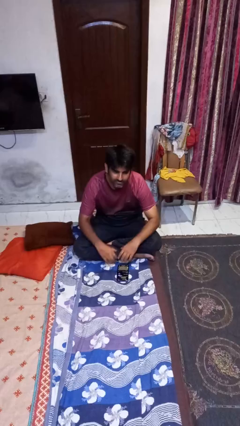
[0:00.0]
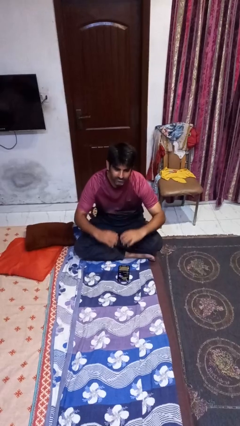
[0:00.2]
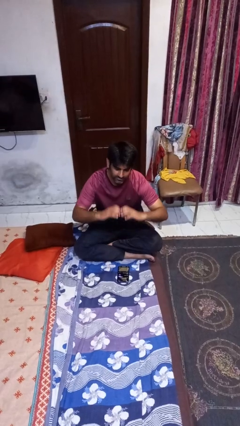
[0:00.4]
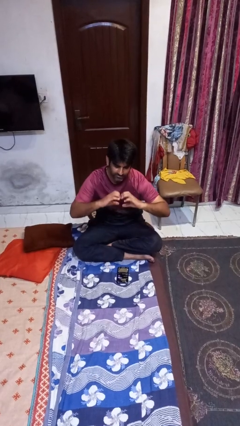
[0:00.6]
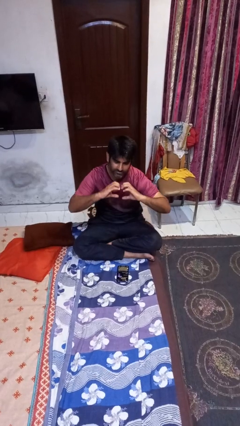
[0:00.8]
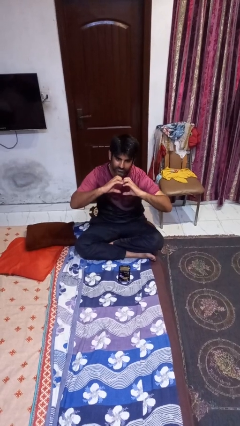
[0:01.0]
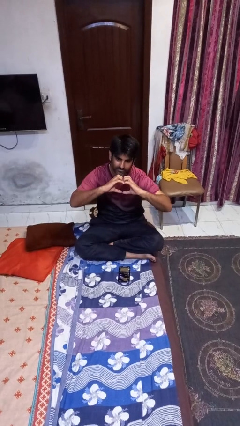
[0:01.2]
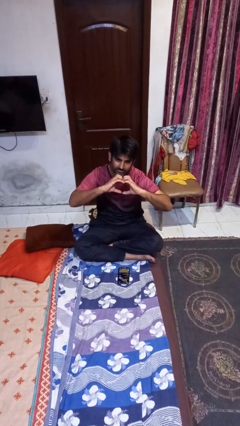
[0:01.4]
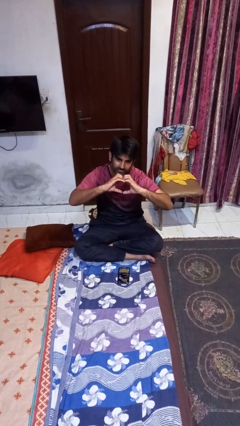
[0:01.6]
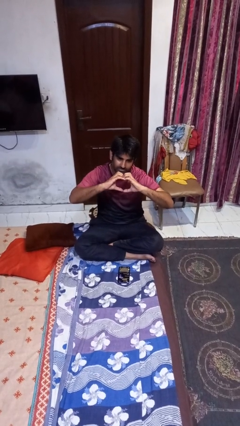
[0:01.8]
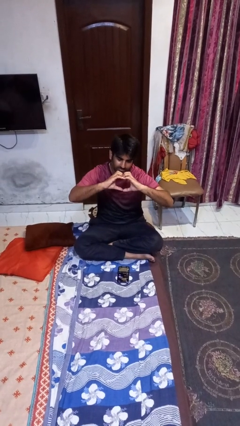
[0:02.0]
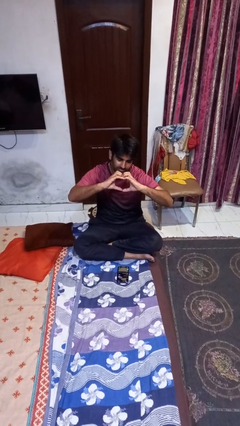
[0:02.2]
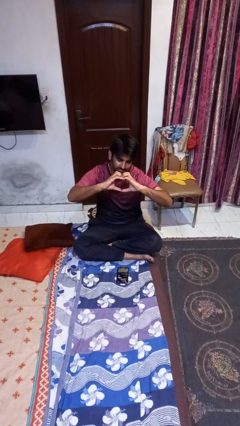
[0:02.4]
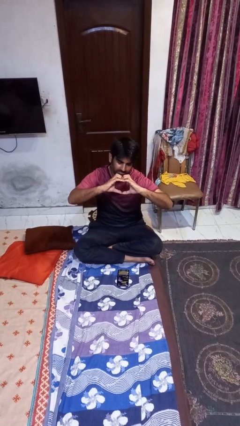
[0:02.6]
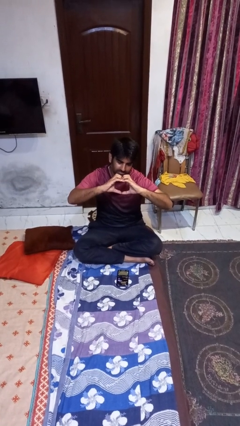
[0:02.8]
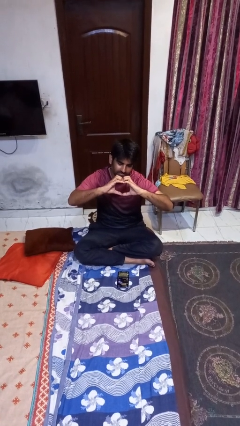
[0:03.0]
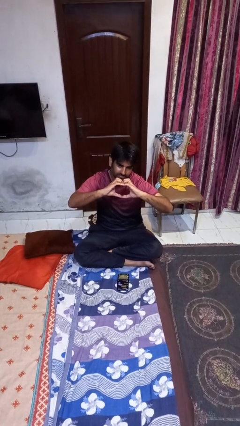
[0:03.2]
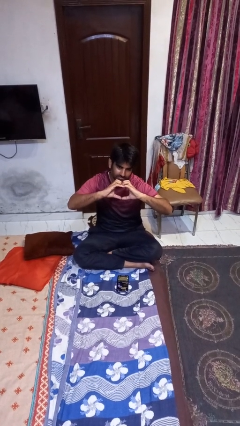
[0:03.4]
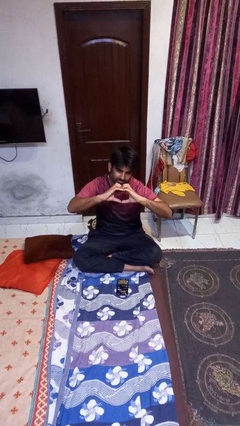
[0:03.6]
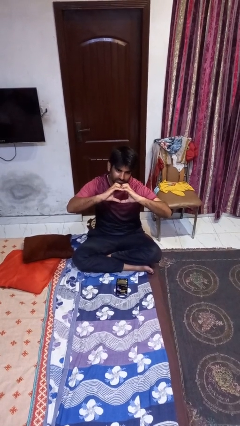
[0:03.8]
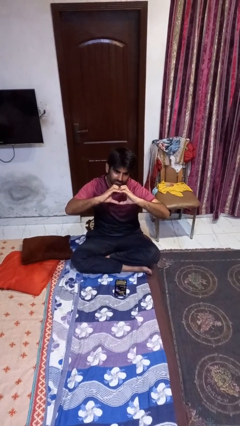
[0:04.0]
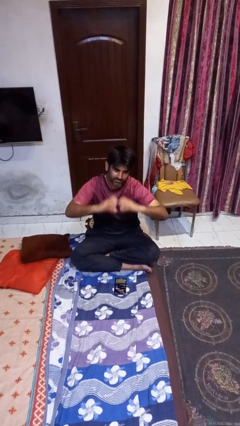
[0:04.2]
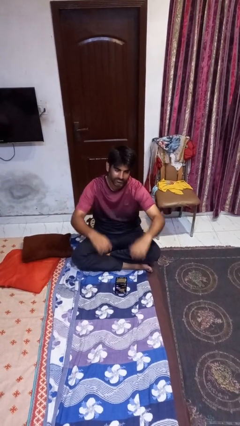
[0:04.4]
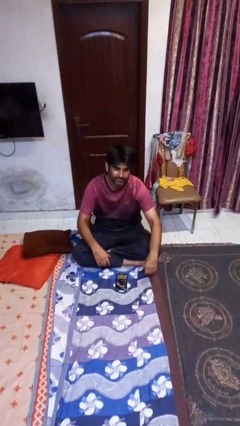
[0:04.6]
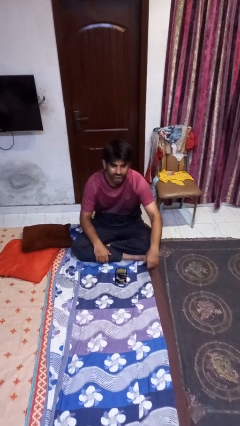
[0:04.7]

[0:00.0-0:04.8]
person gestures heart

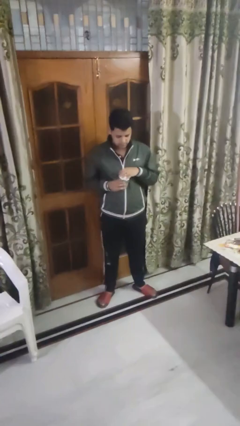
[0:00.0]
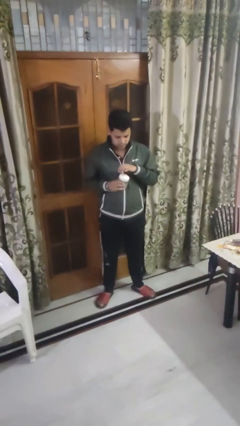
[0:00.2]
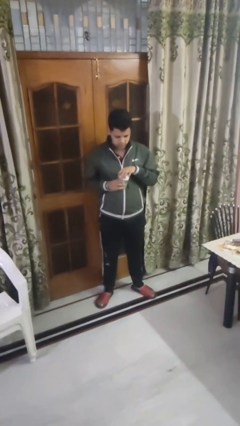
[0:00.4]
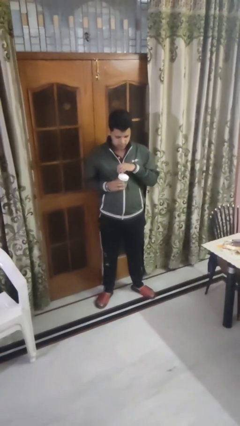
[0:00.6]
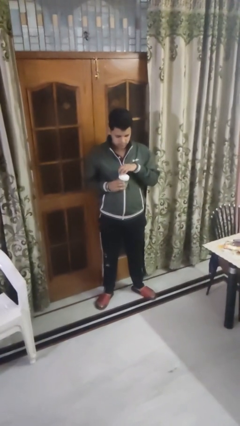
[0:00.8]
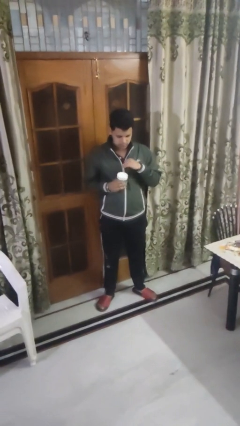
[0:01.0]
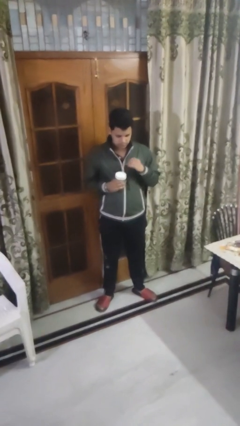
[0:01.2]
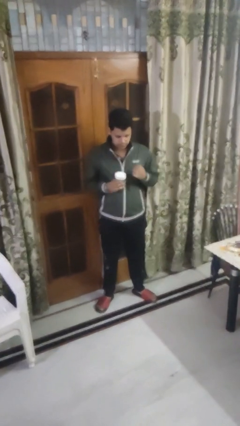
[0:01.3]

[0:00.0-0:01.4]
person closes jar

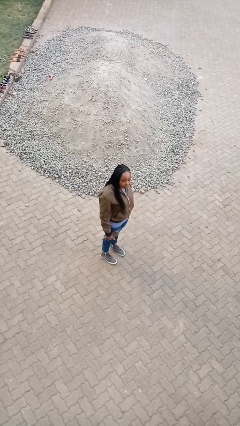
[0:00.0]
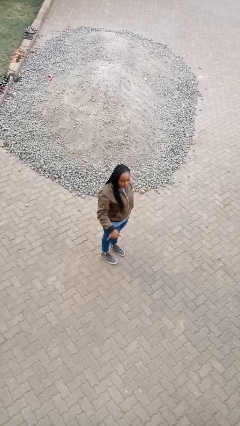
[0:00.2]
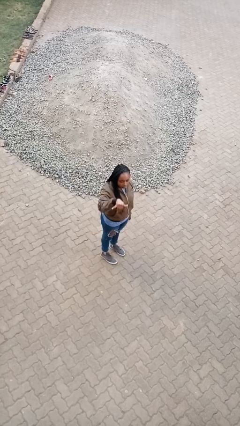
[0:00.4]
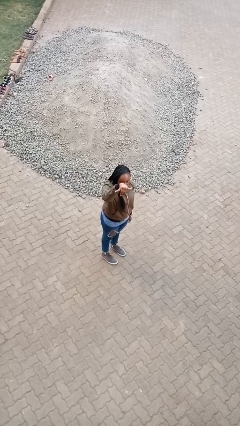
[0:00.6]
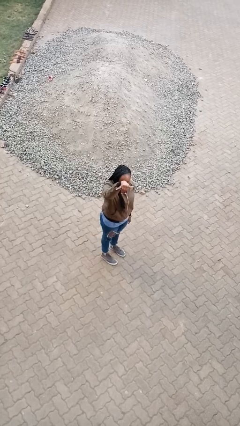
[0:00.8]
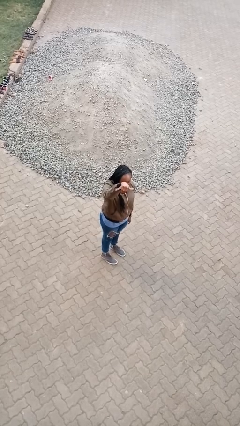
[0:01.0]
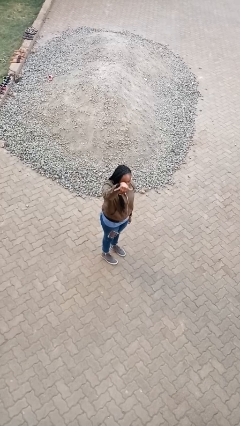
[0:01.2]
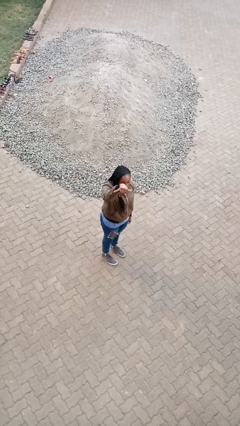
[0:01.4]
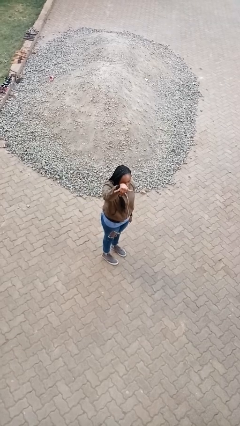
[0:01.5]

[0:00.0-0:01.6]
person gestures hang loose

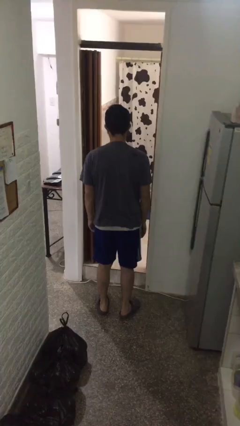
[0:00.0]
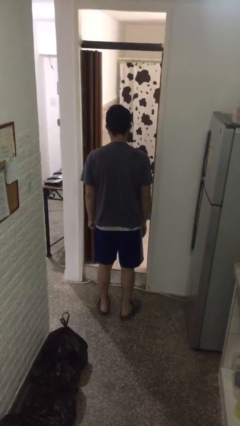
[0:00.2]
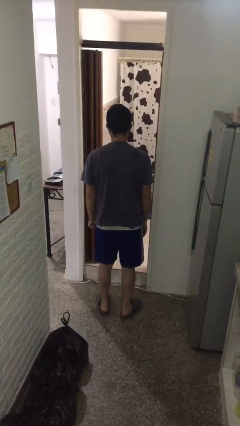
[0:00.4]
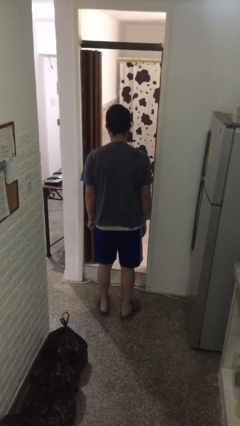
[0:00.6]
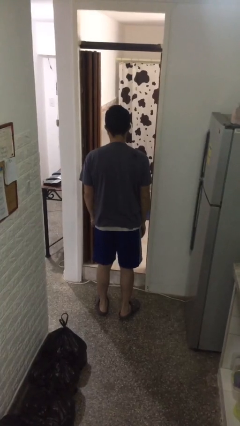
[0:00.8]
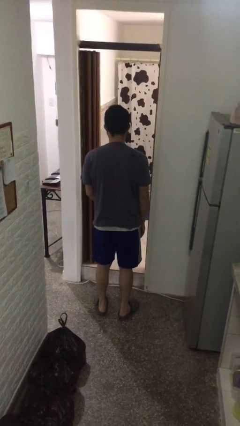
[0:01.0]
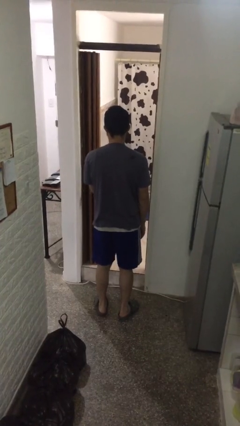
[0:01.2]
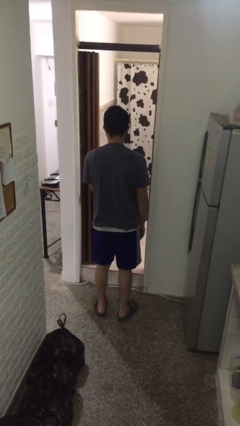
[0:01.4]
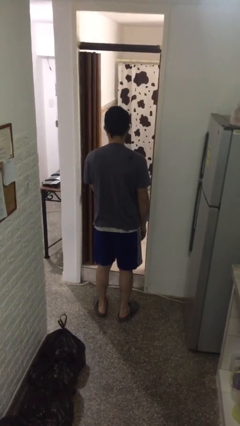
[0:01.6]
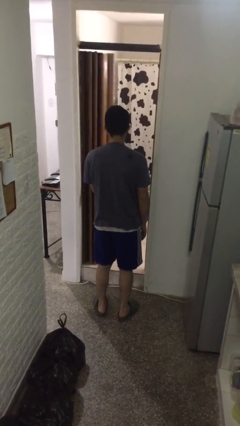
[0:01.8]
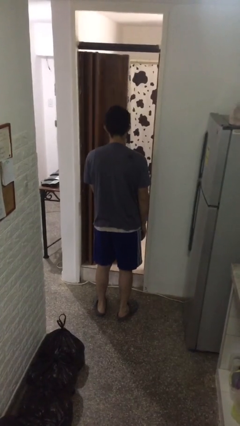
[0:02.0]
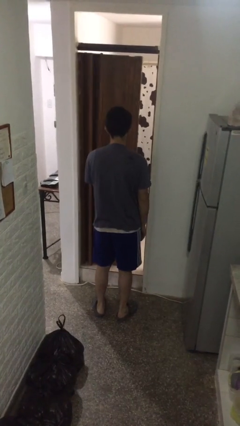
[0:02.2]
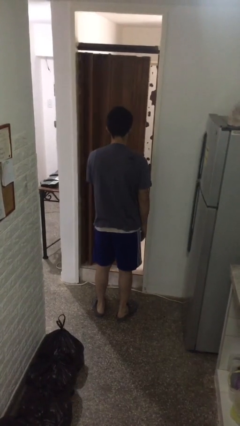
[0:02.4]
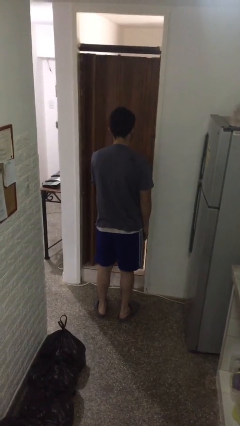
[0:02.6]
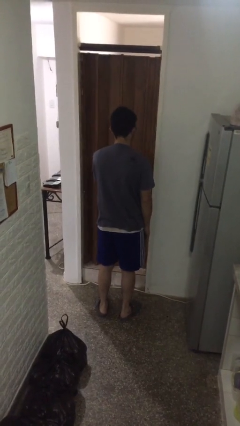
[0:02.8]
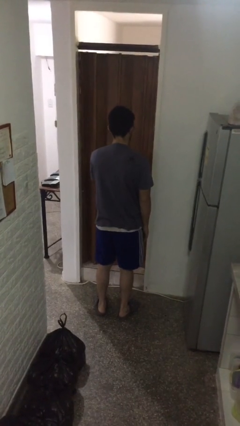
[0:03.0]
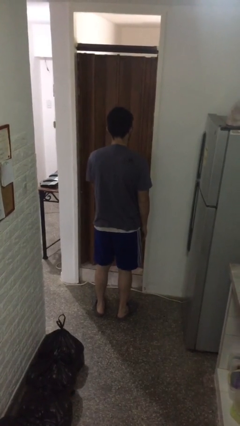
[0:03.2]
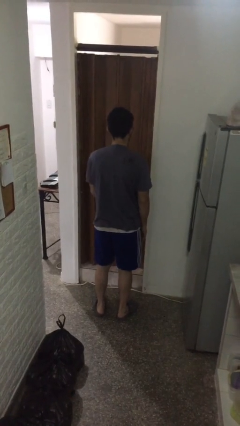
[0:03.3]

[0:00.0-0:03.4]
person closes sliding door

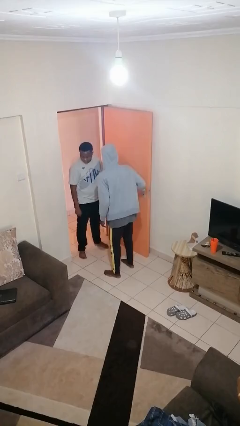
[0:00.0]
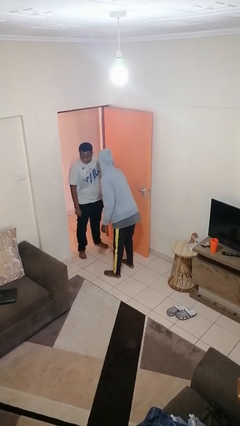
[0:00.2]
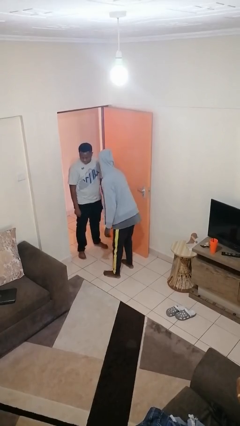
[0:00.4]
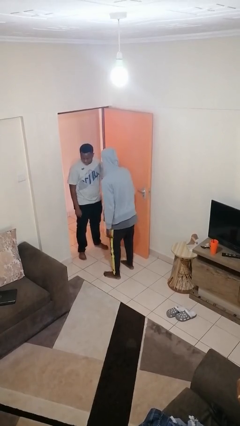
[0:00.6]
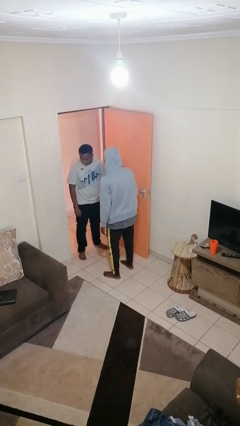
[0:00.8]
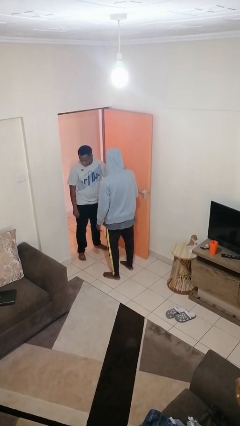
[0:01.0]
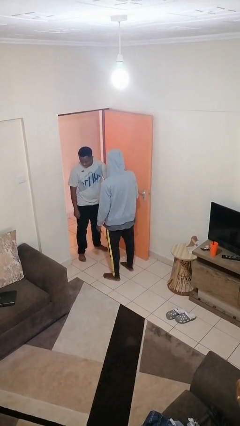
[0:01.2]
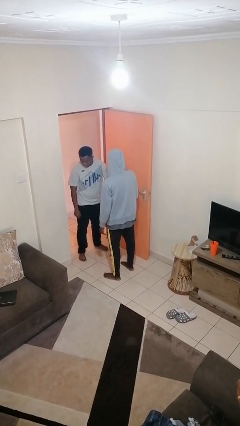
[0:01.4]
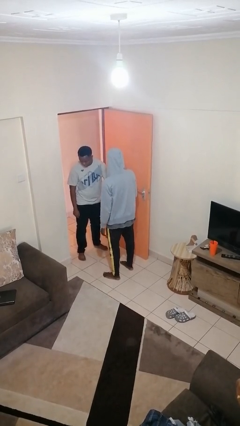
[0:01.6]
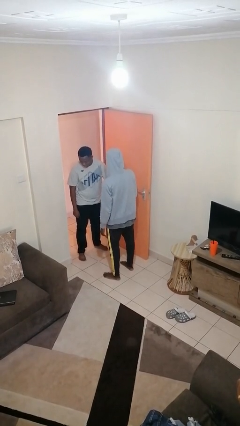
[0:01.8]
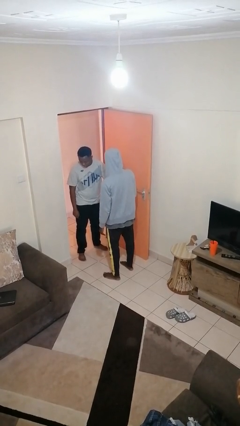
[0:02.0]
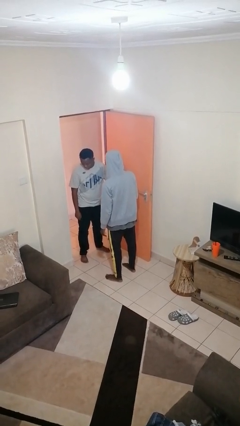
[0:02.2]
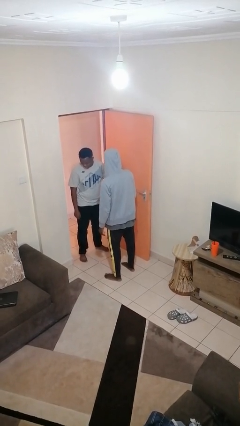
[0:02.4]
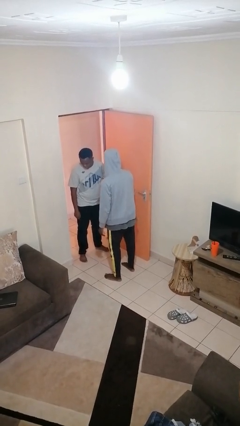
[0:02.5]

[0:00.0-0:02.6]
person grabs person by forearm

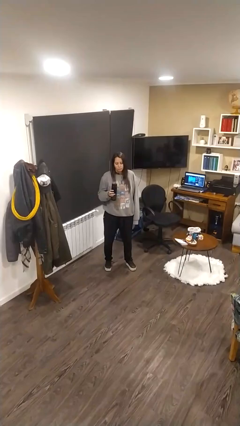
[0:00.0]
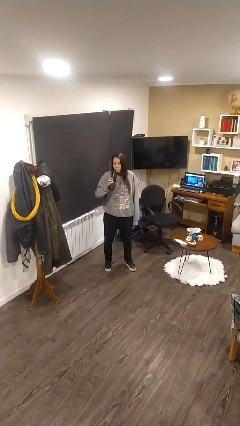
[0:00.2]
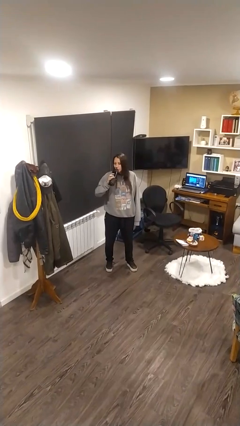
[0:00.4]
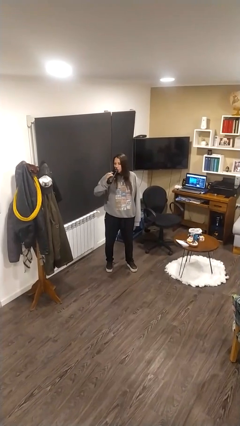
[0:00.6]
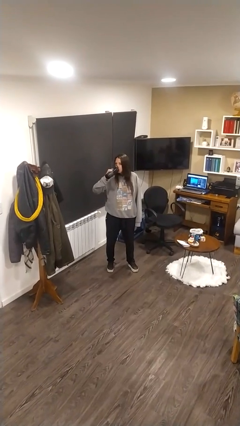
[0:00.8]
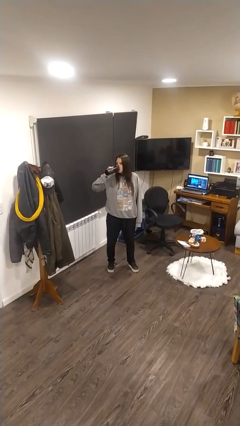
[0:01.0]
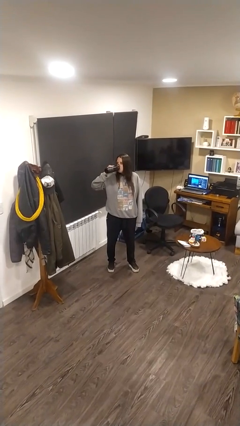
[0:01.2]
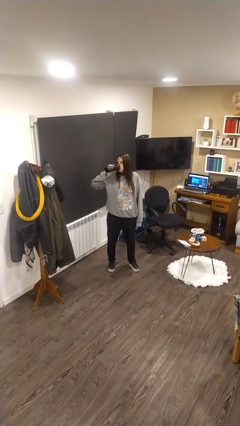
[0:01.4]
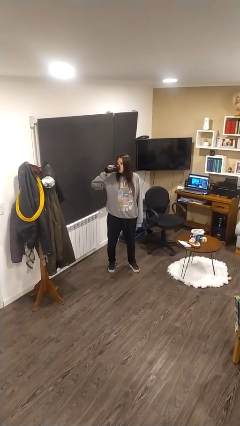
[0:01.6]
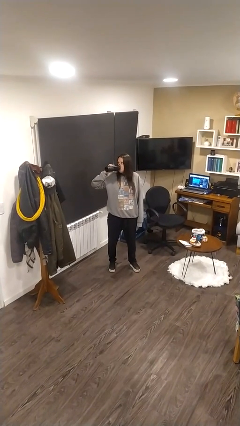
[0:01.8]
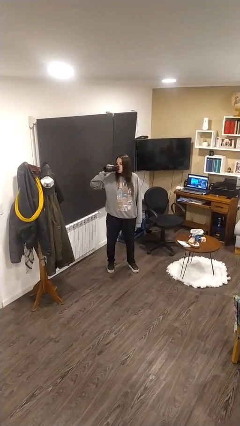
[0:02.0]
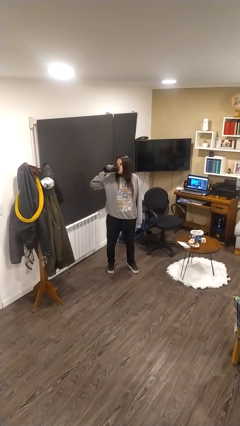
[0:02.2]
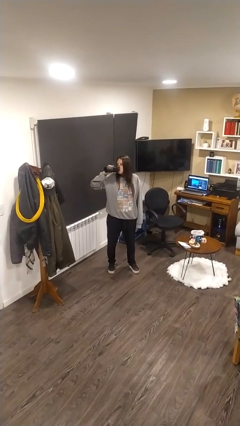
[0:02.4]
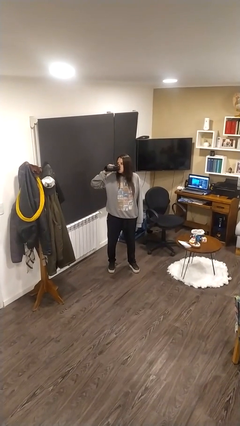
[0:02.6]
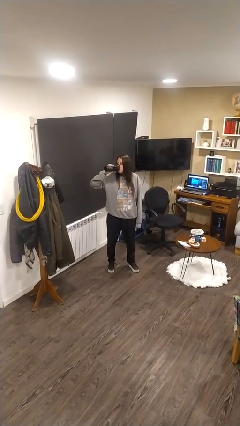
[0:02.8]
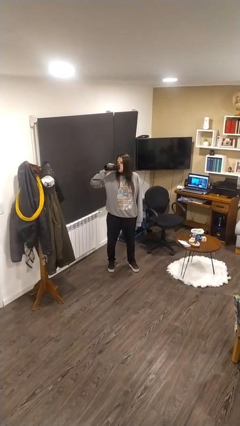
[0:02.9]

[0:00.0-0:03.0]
person drinks from bottle

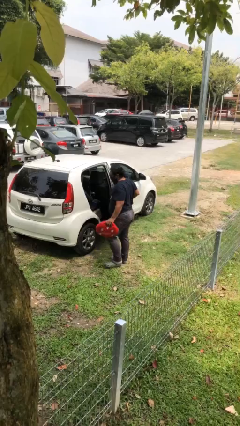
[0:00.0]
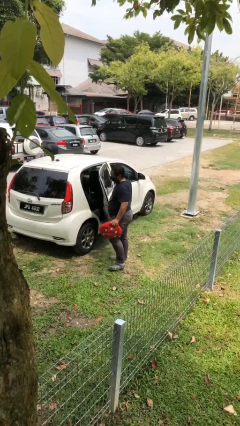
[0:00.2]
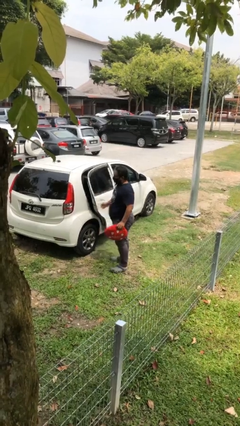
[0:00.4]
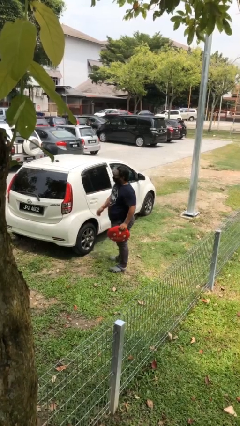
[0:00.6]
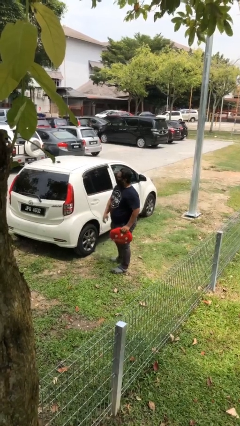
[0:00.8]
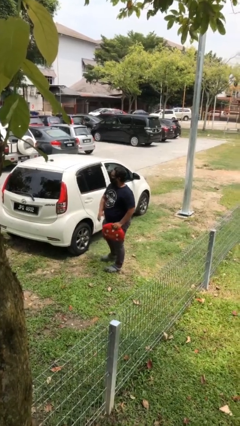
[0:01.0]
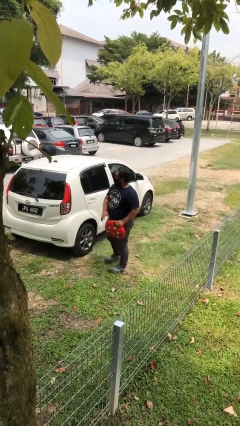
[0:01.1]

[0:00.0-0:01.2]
person closes car door
